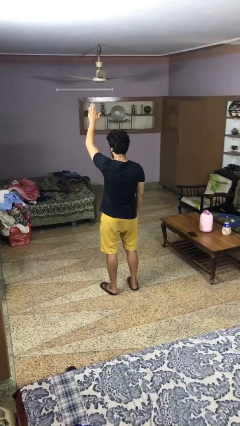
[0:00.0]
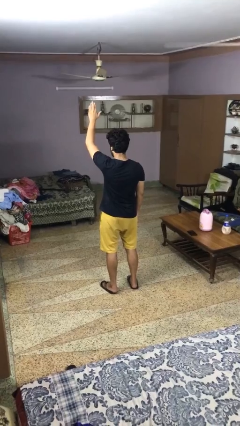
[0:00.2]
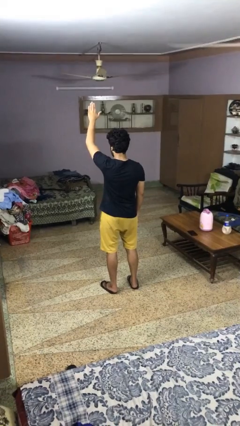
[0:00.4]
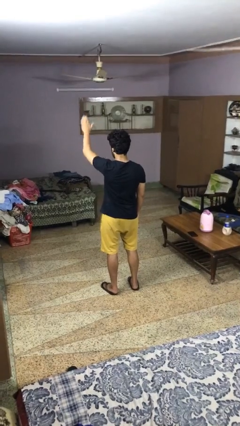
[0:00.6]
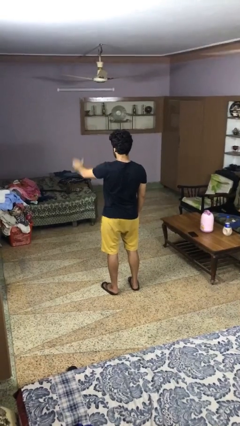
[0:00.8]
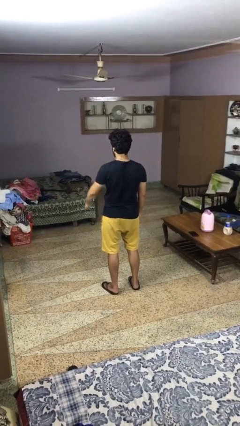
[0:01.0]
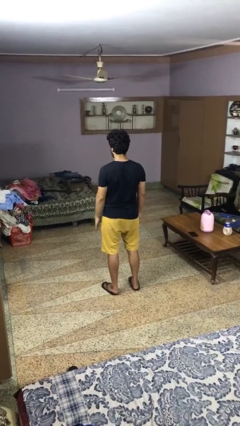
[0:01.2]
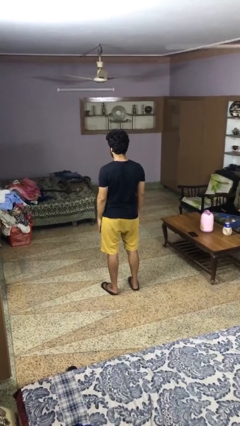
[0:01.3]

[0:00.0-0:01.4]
person gestures lower hand

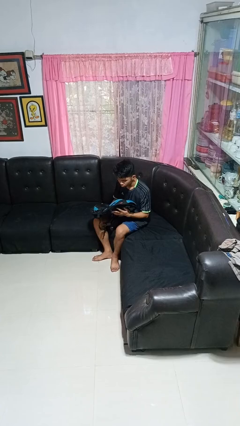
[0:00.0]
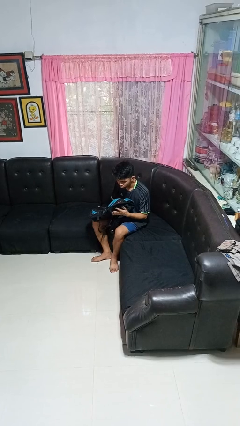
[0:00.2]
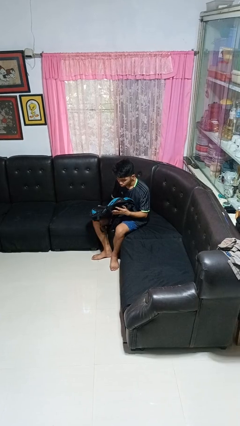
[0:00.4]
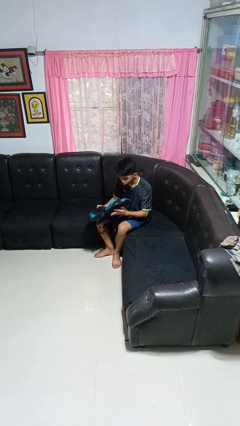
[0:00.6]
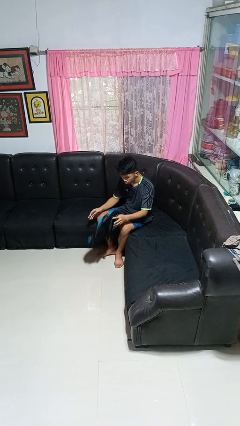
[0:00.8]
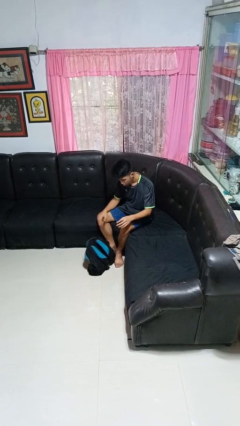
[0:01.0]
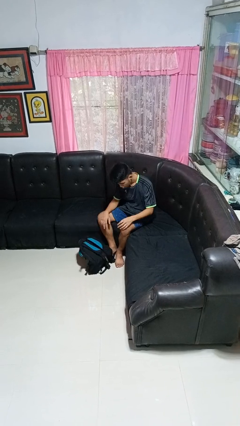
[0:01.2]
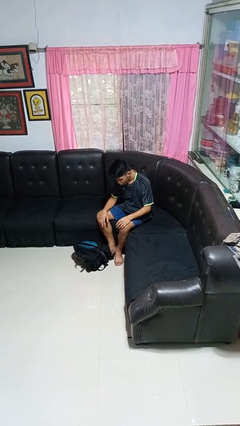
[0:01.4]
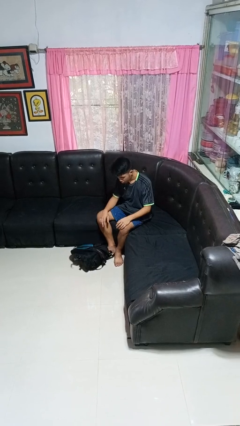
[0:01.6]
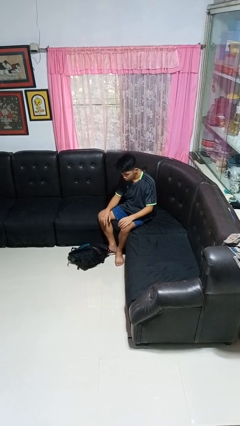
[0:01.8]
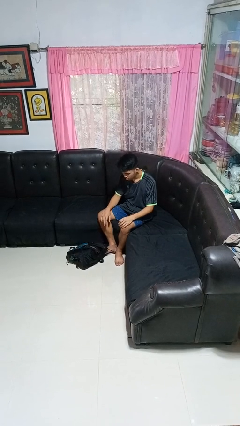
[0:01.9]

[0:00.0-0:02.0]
person drops object

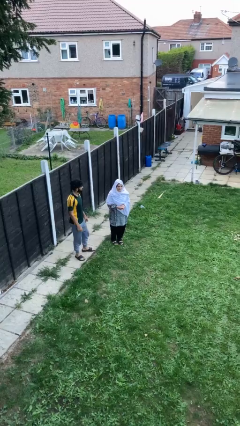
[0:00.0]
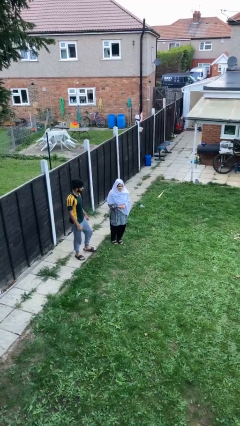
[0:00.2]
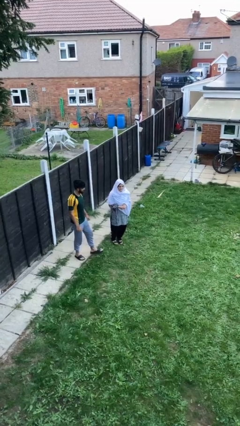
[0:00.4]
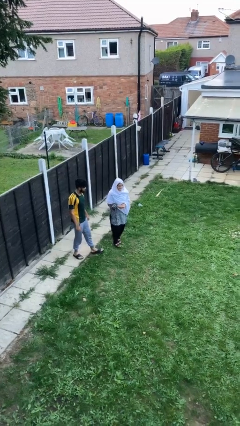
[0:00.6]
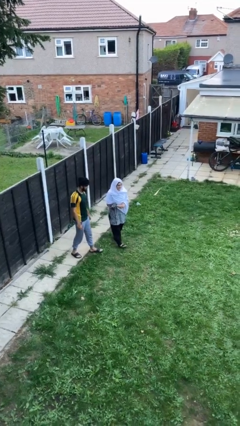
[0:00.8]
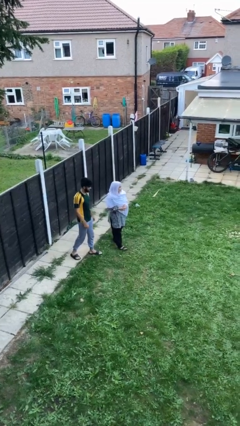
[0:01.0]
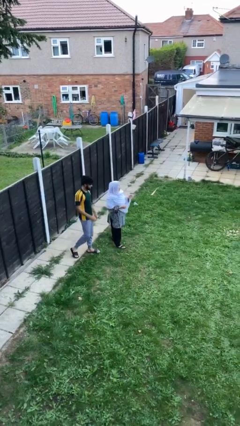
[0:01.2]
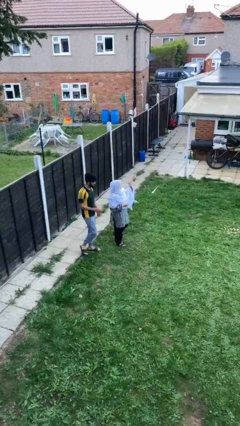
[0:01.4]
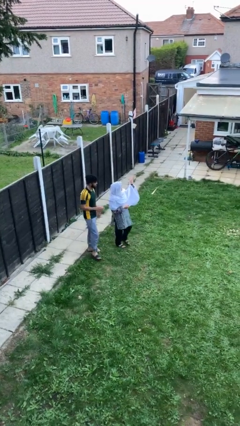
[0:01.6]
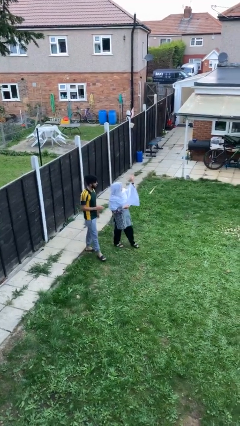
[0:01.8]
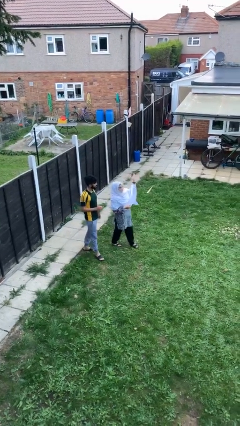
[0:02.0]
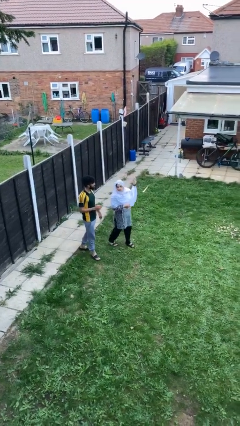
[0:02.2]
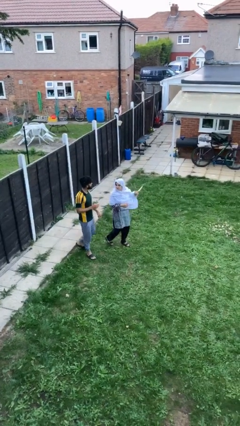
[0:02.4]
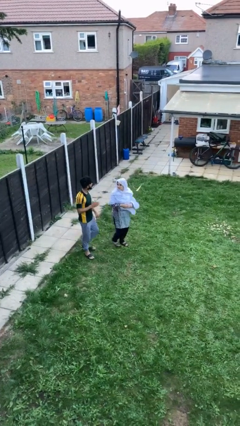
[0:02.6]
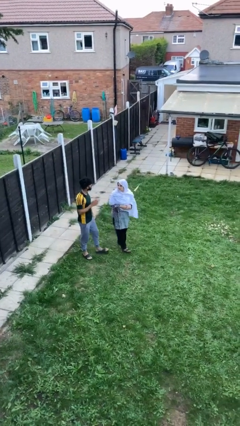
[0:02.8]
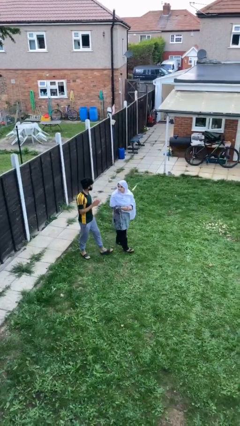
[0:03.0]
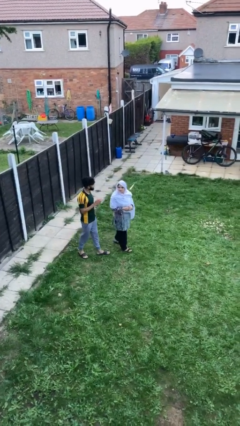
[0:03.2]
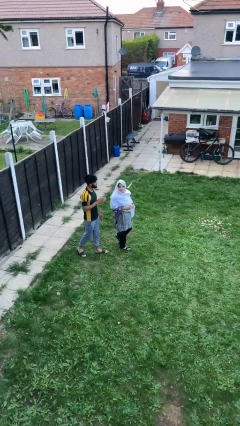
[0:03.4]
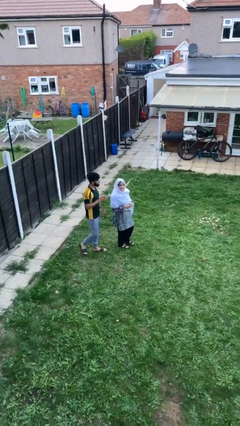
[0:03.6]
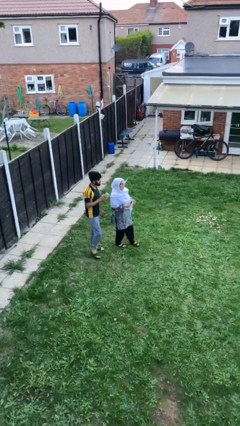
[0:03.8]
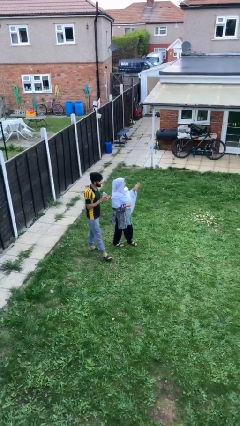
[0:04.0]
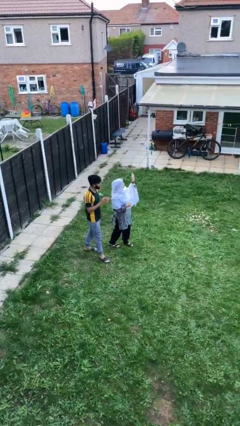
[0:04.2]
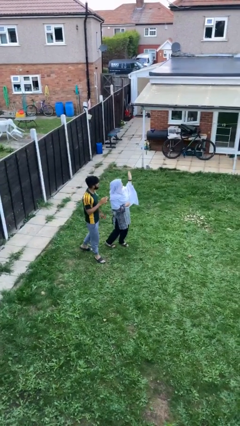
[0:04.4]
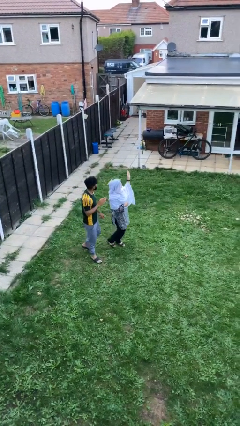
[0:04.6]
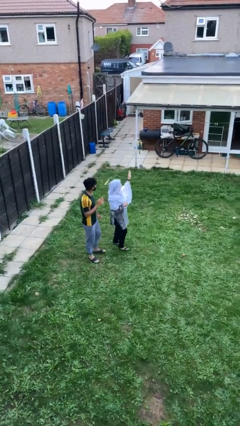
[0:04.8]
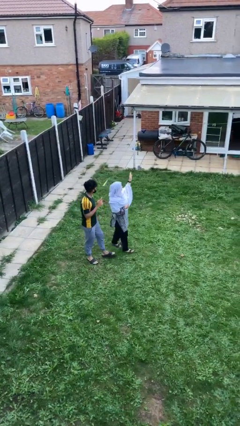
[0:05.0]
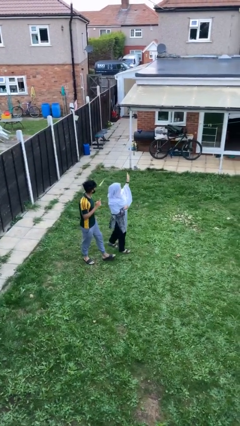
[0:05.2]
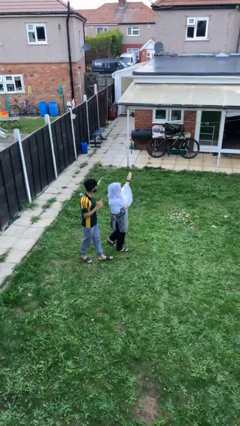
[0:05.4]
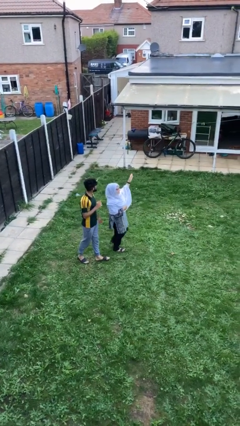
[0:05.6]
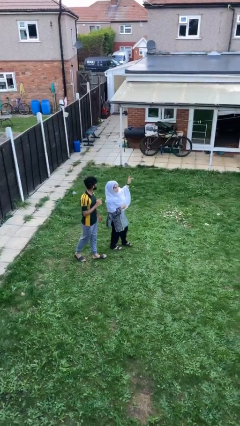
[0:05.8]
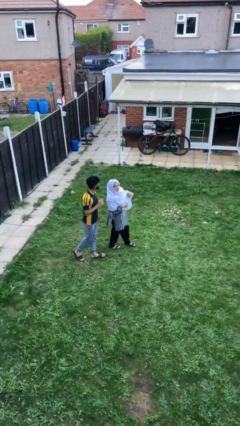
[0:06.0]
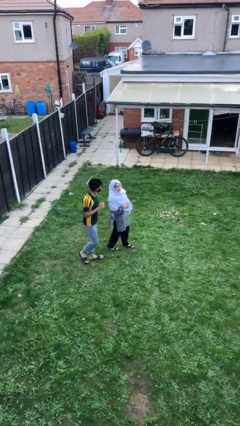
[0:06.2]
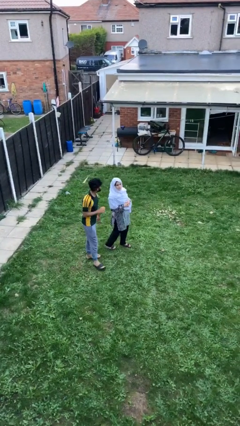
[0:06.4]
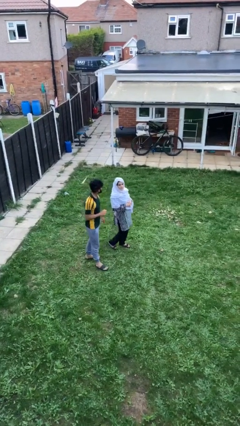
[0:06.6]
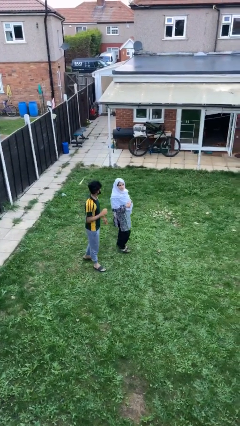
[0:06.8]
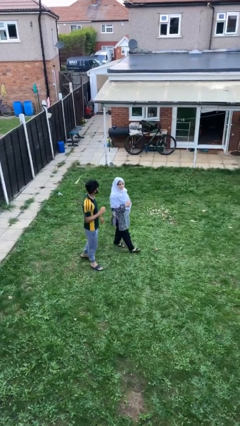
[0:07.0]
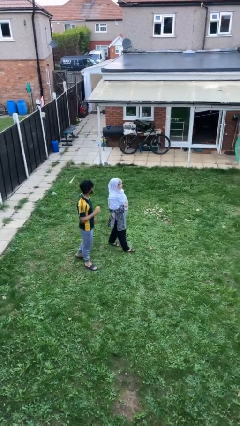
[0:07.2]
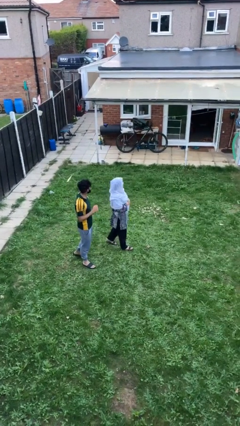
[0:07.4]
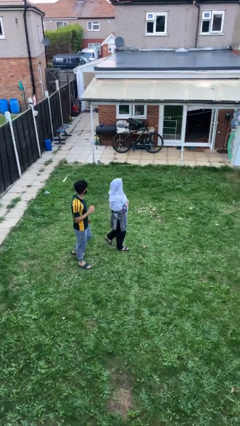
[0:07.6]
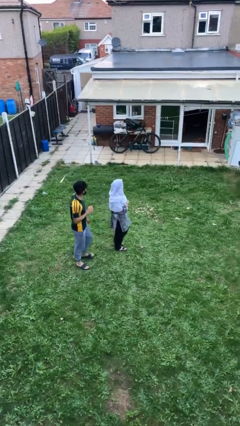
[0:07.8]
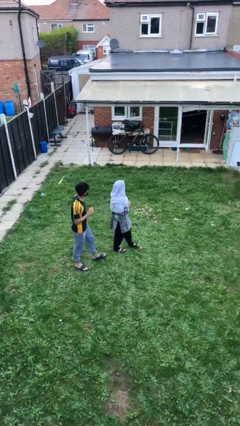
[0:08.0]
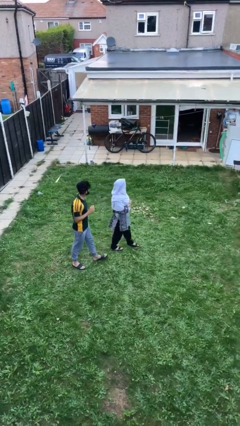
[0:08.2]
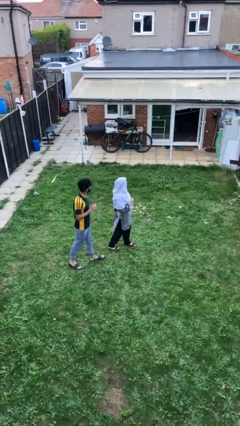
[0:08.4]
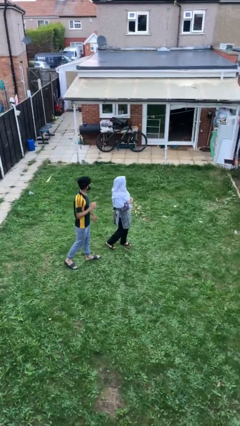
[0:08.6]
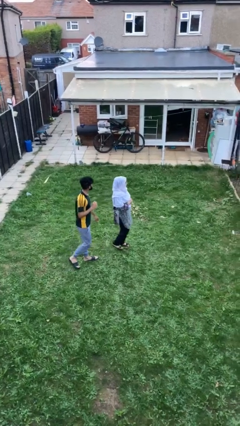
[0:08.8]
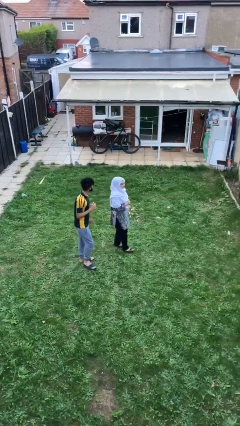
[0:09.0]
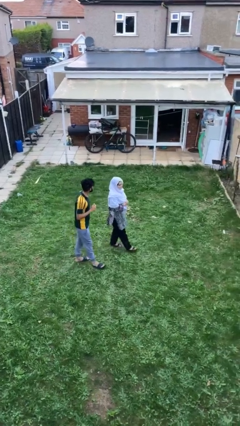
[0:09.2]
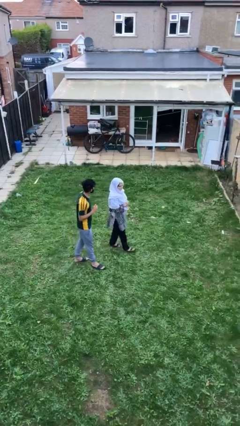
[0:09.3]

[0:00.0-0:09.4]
person talks to person

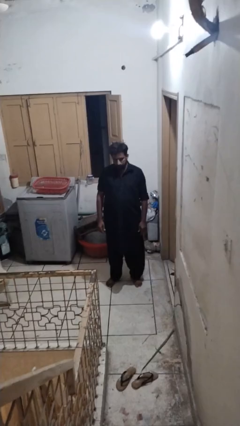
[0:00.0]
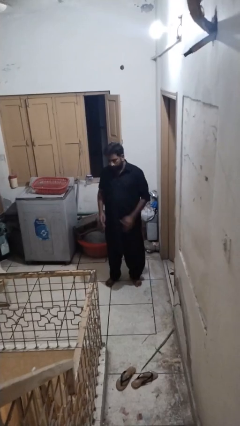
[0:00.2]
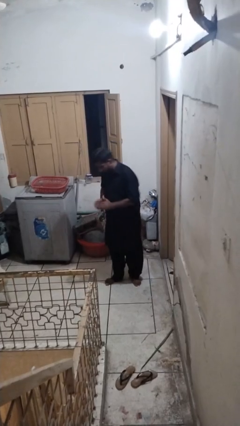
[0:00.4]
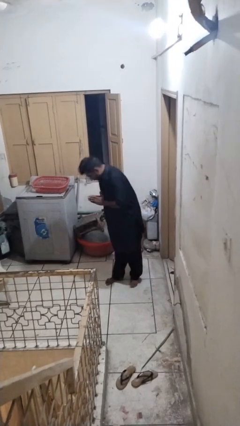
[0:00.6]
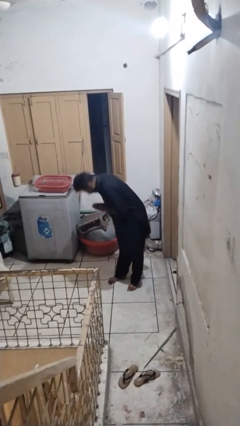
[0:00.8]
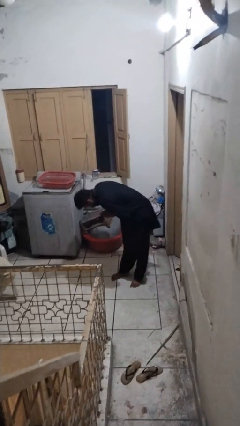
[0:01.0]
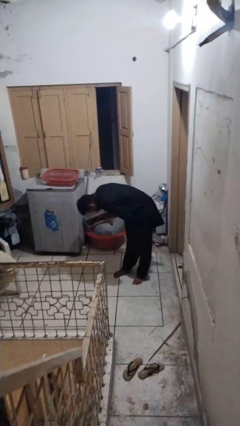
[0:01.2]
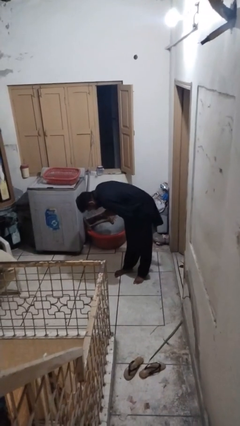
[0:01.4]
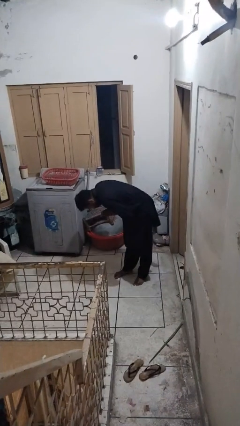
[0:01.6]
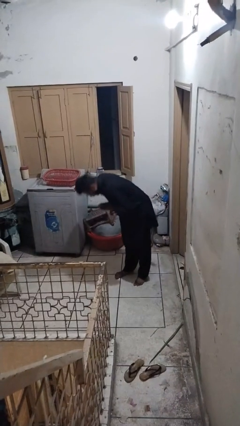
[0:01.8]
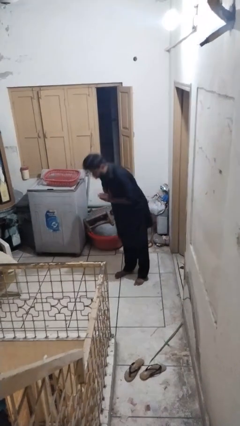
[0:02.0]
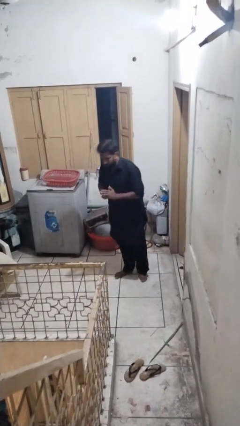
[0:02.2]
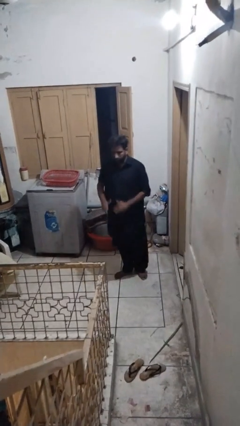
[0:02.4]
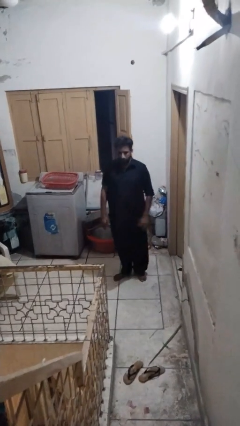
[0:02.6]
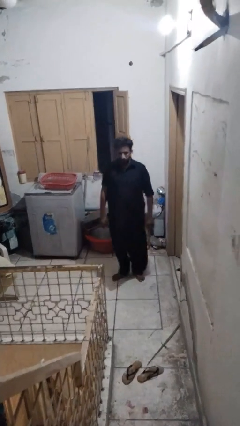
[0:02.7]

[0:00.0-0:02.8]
person bows

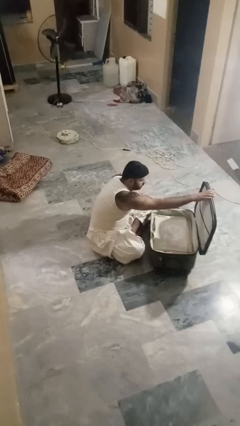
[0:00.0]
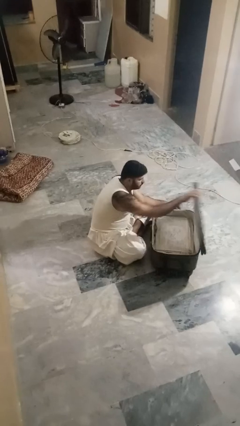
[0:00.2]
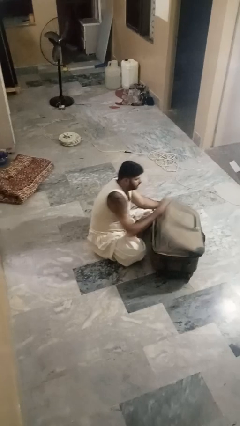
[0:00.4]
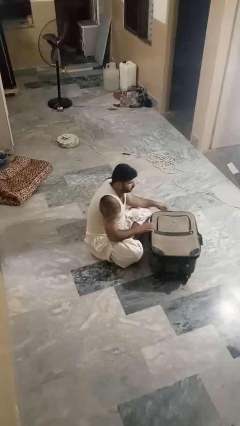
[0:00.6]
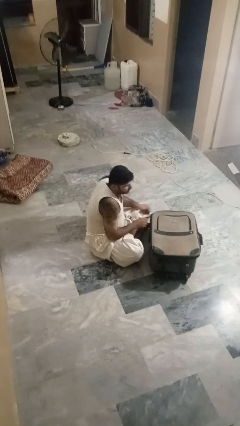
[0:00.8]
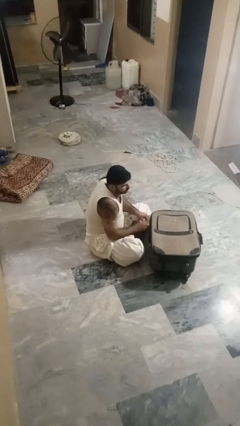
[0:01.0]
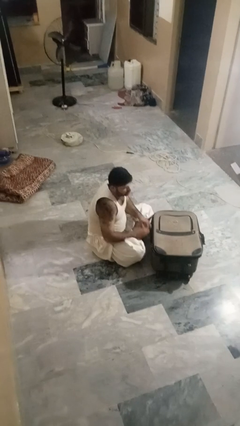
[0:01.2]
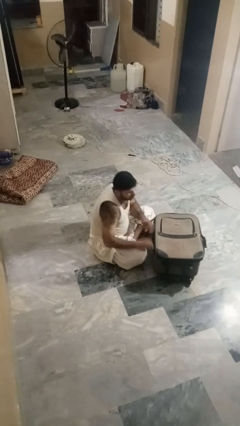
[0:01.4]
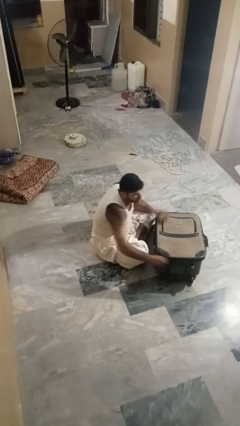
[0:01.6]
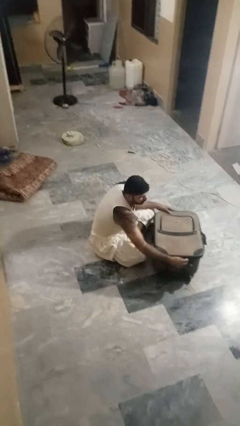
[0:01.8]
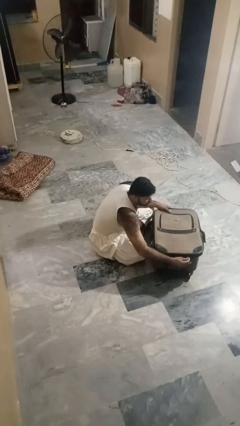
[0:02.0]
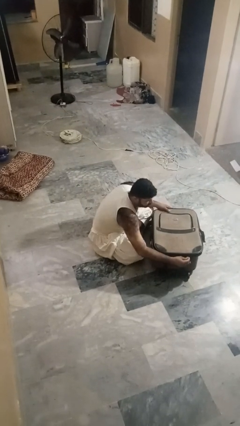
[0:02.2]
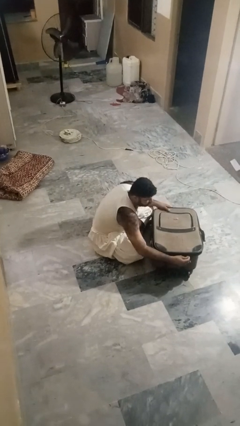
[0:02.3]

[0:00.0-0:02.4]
person closes suitcase
